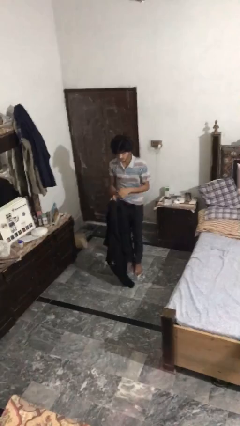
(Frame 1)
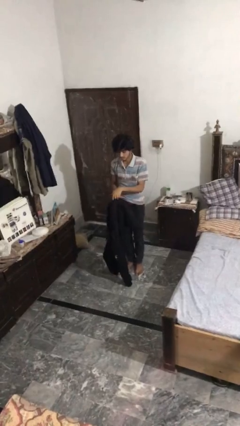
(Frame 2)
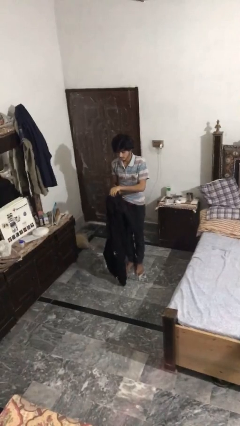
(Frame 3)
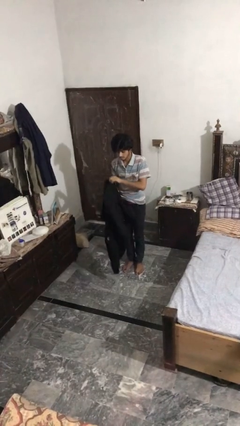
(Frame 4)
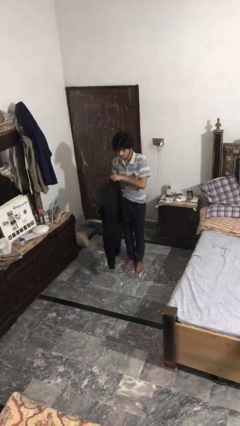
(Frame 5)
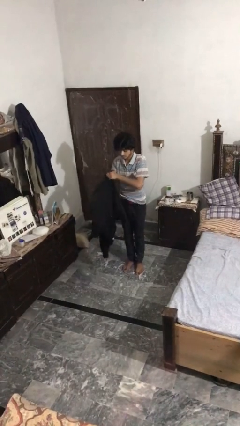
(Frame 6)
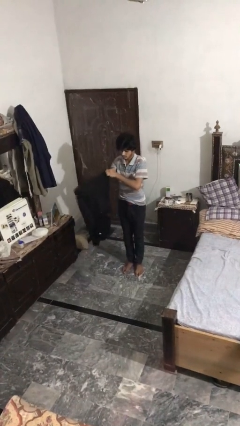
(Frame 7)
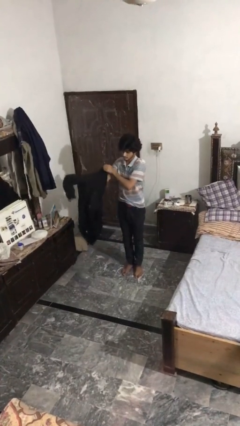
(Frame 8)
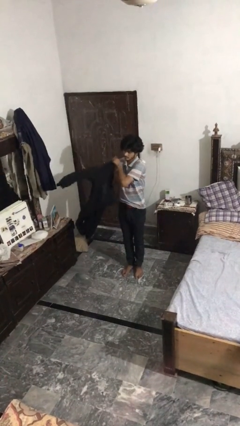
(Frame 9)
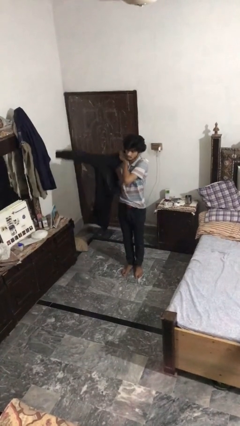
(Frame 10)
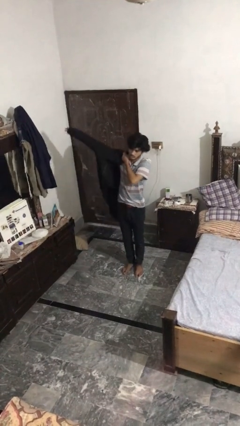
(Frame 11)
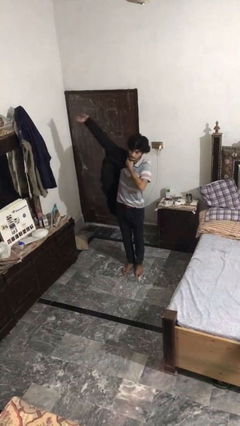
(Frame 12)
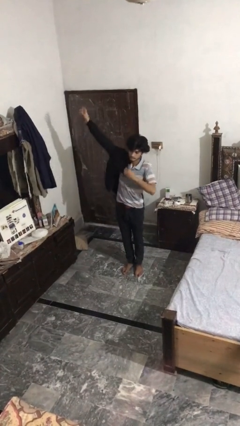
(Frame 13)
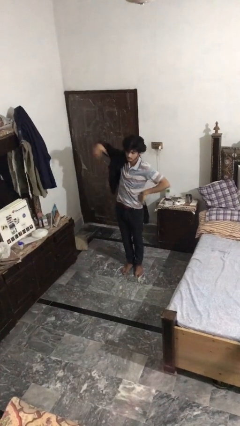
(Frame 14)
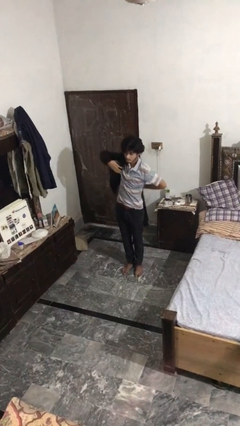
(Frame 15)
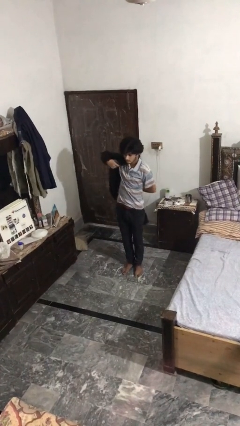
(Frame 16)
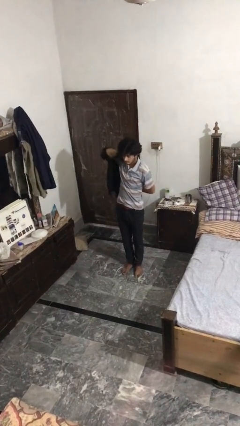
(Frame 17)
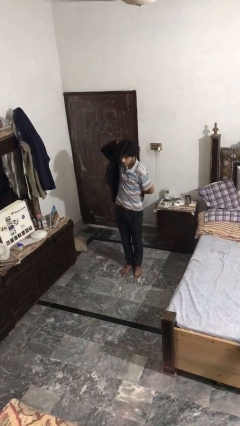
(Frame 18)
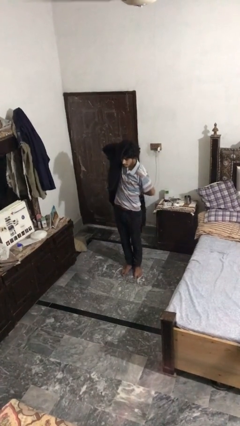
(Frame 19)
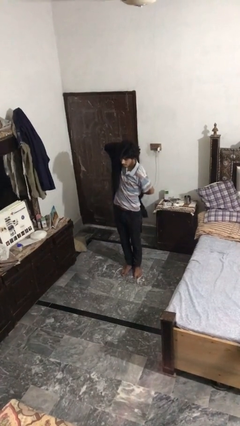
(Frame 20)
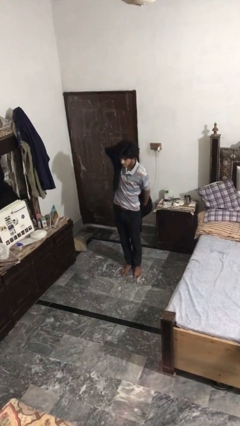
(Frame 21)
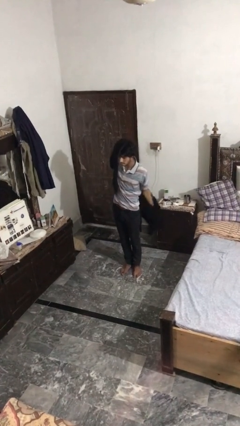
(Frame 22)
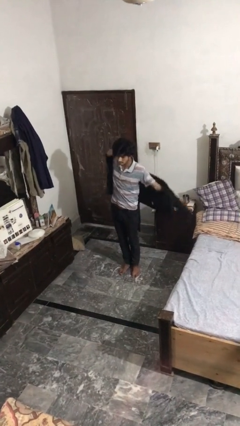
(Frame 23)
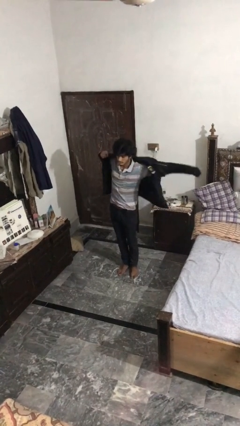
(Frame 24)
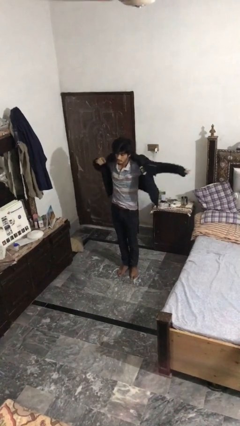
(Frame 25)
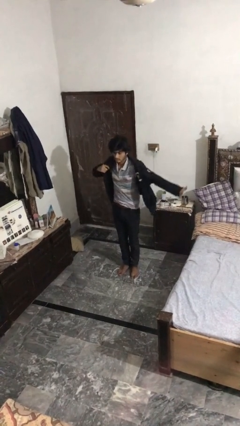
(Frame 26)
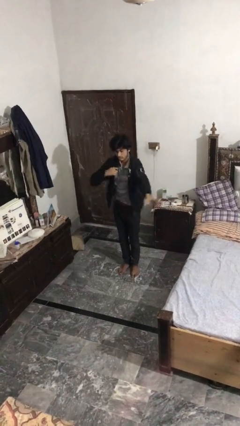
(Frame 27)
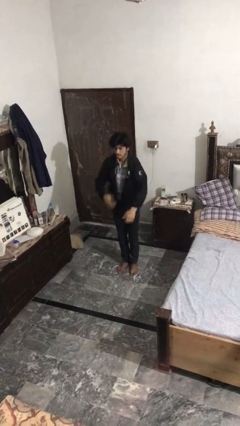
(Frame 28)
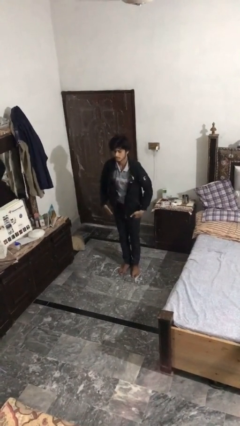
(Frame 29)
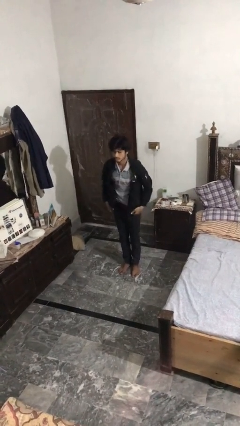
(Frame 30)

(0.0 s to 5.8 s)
person puts on jacket

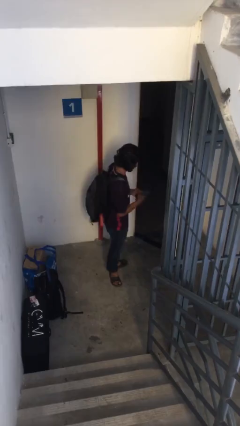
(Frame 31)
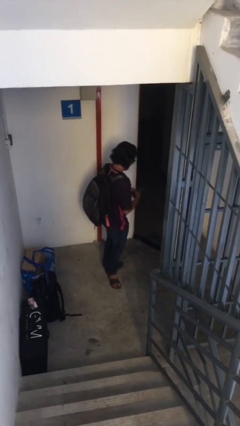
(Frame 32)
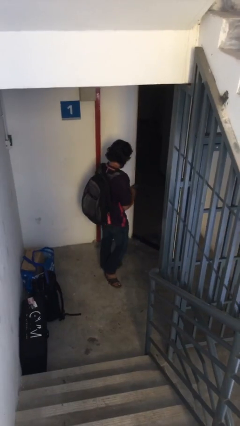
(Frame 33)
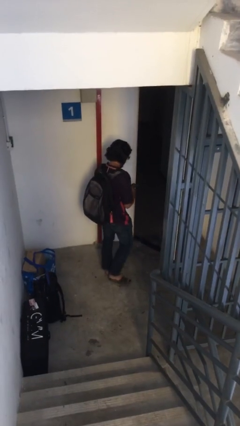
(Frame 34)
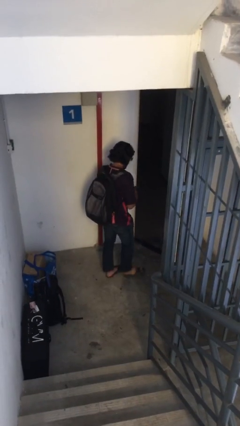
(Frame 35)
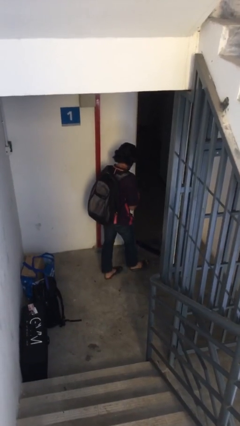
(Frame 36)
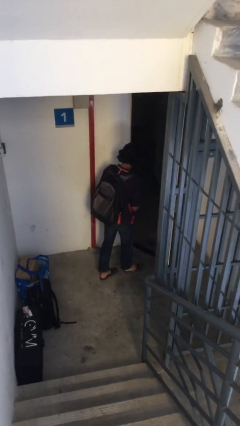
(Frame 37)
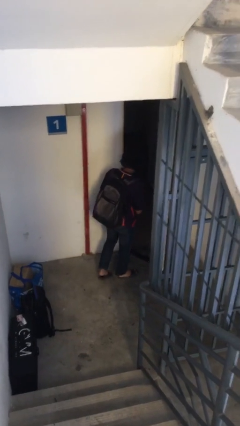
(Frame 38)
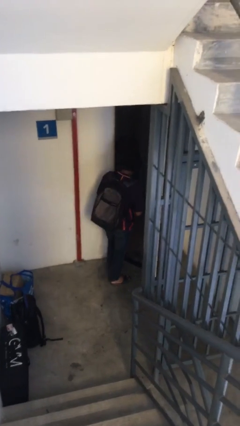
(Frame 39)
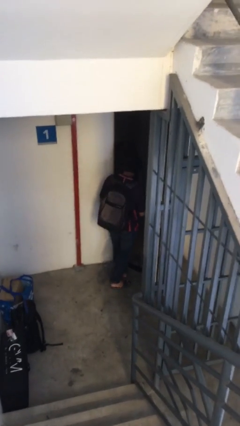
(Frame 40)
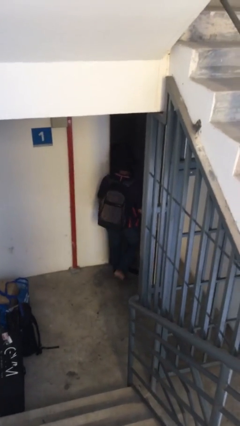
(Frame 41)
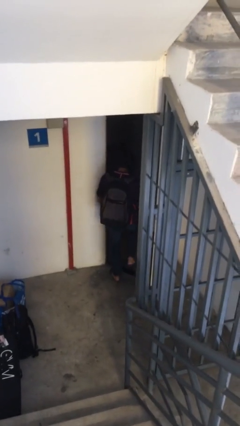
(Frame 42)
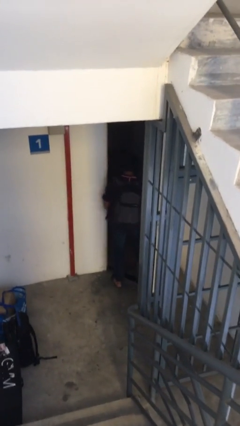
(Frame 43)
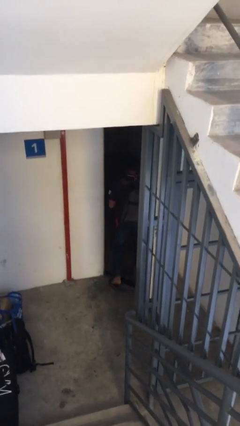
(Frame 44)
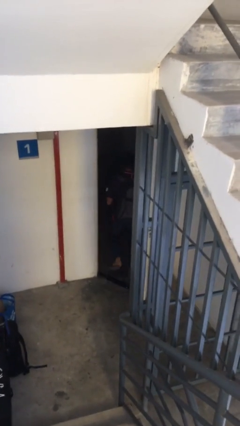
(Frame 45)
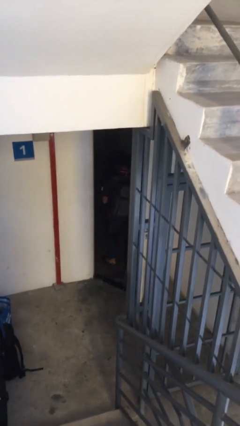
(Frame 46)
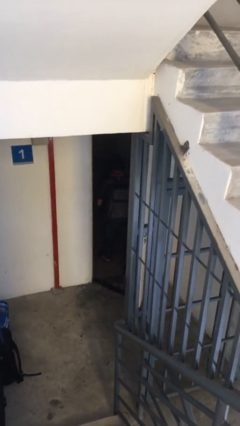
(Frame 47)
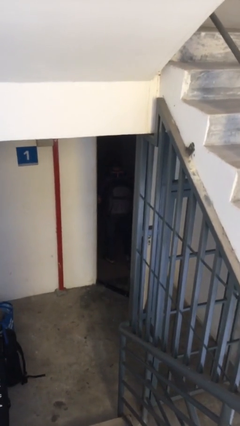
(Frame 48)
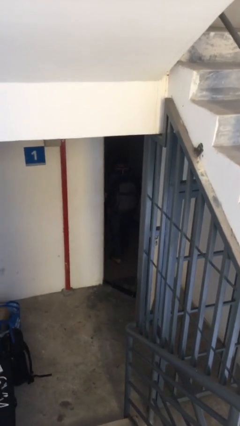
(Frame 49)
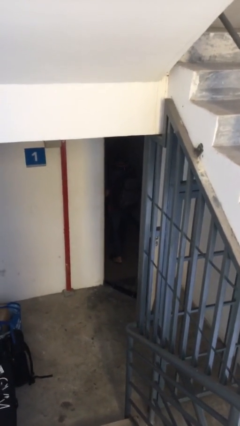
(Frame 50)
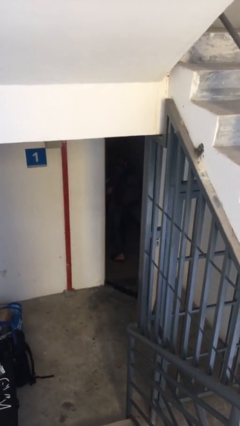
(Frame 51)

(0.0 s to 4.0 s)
person exits scene through structure

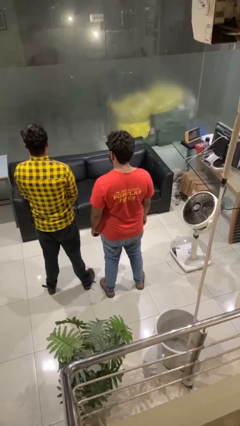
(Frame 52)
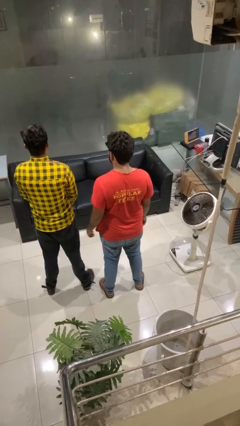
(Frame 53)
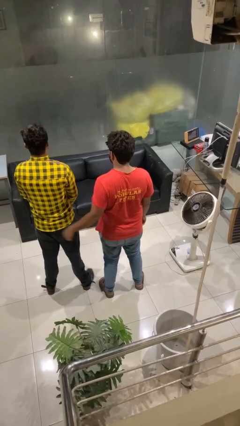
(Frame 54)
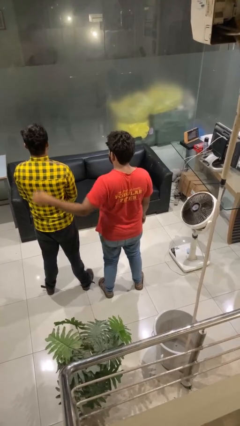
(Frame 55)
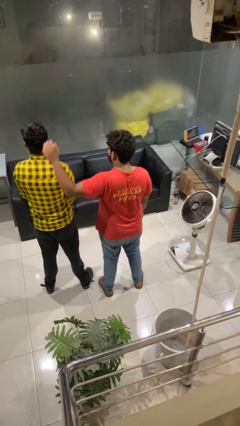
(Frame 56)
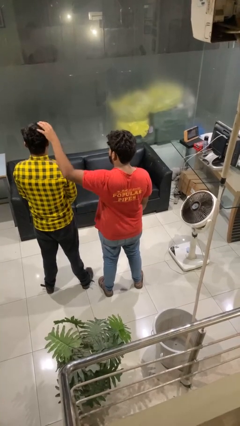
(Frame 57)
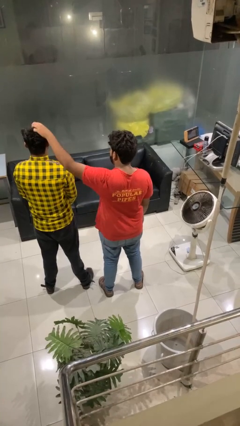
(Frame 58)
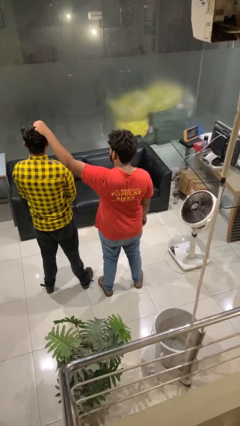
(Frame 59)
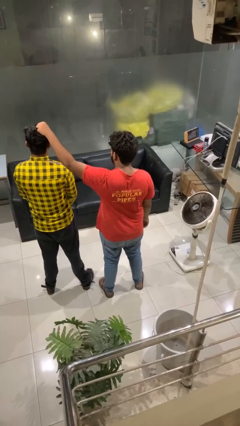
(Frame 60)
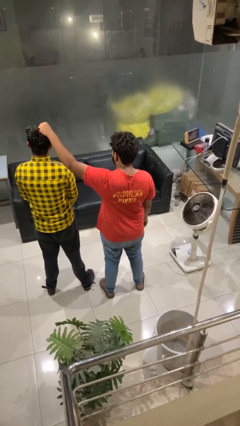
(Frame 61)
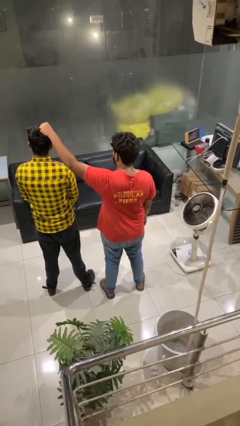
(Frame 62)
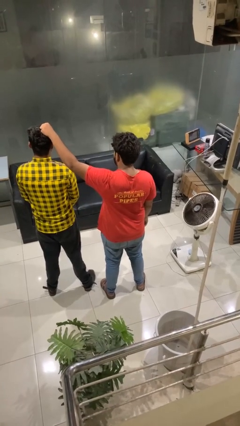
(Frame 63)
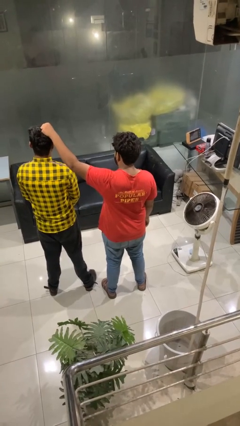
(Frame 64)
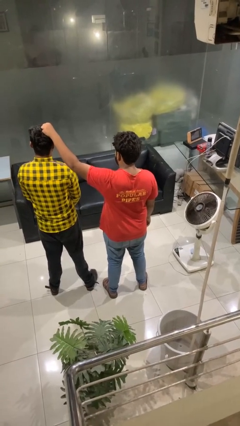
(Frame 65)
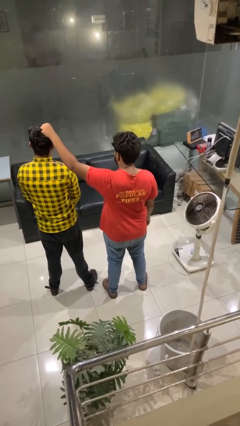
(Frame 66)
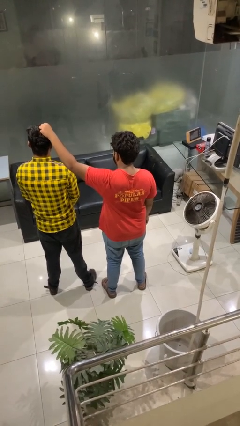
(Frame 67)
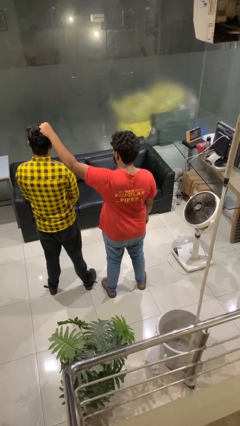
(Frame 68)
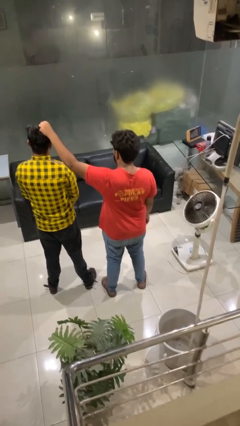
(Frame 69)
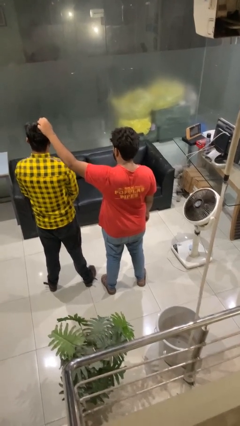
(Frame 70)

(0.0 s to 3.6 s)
person grabs person by hair

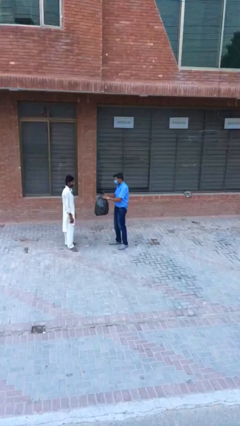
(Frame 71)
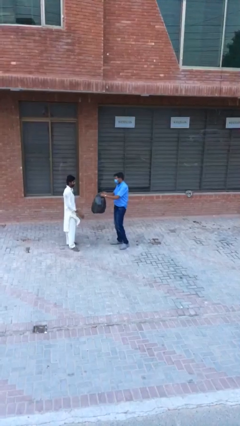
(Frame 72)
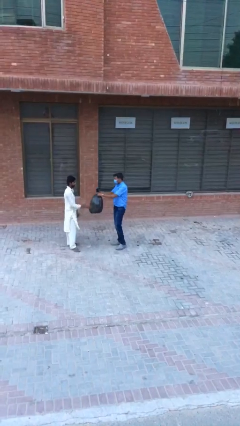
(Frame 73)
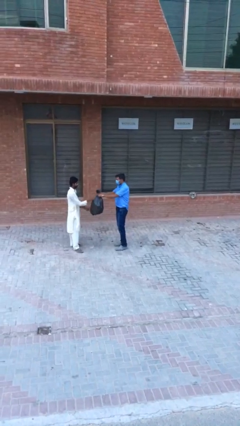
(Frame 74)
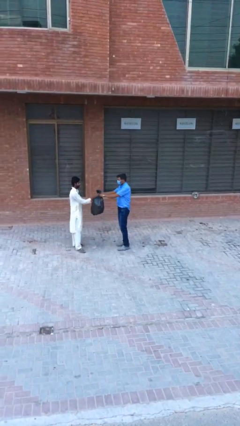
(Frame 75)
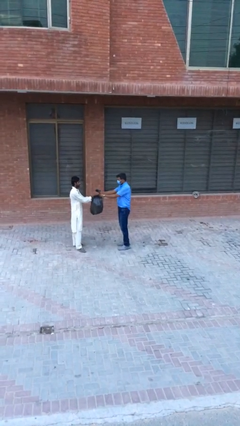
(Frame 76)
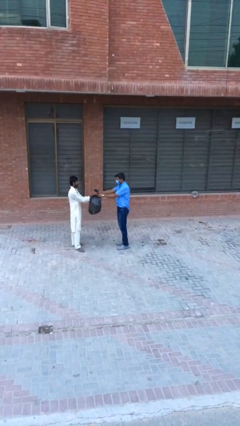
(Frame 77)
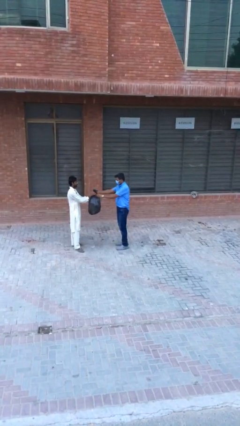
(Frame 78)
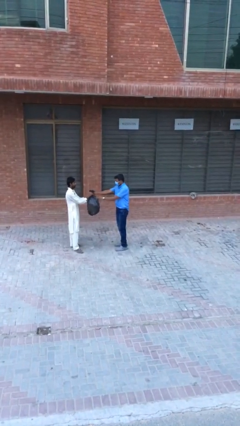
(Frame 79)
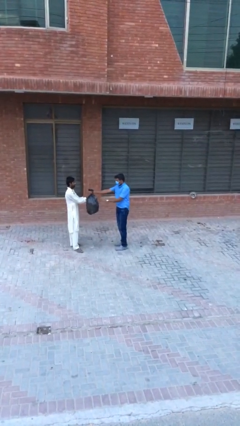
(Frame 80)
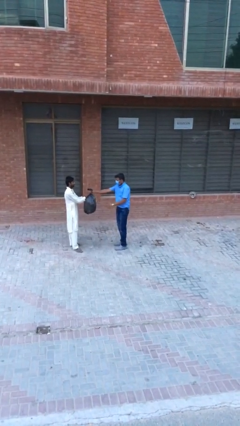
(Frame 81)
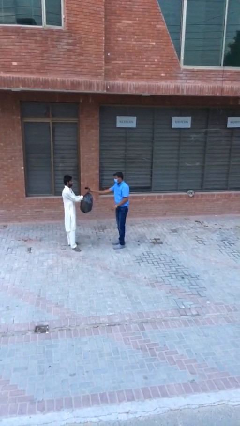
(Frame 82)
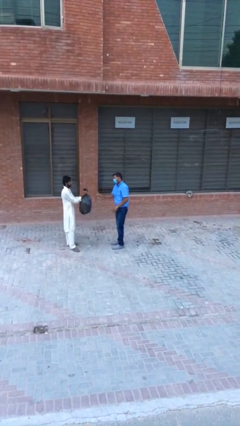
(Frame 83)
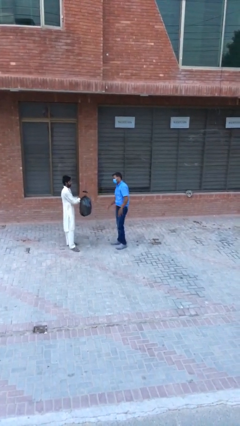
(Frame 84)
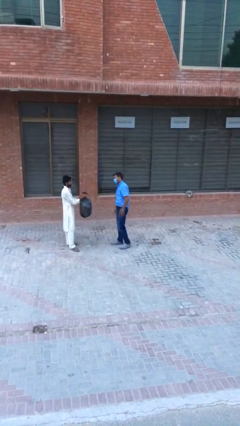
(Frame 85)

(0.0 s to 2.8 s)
person transfers object to person

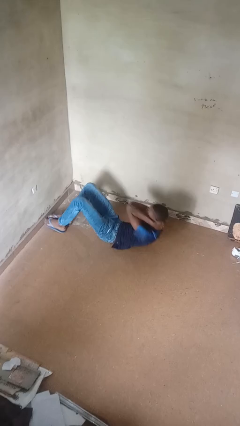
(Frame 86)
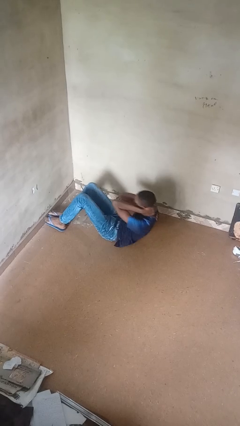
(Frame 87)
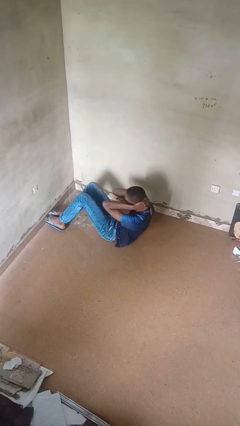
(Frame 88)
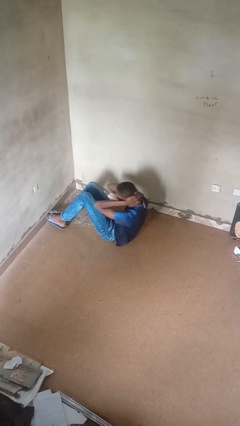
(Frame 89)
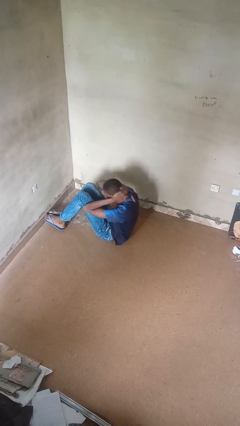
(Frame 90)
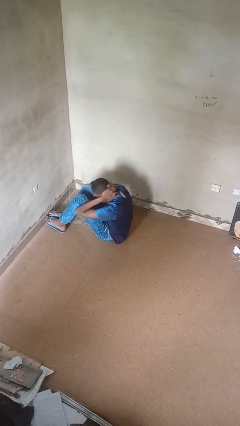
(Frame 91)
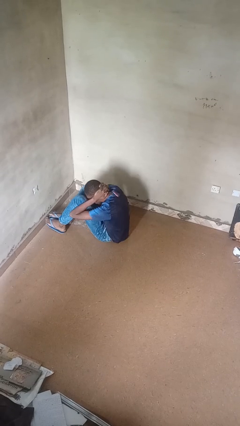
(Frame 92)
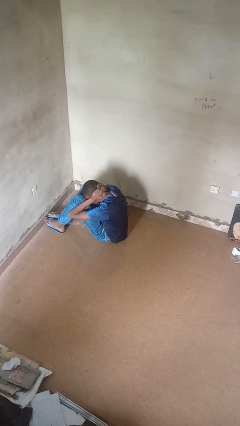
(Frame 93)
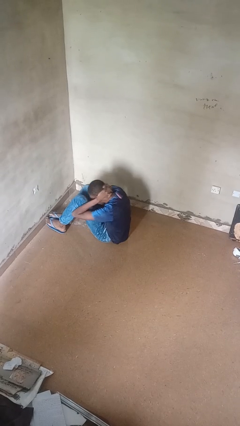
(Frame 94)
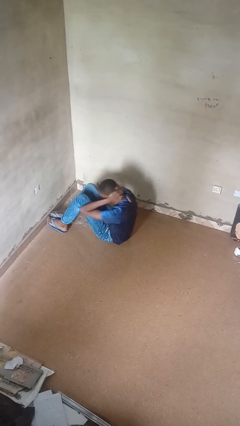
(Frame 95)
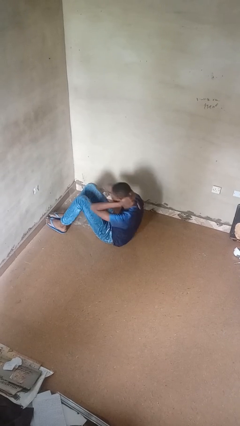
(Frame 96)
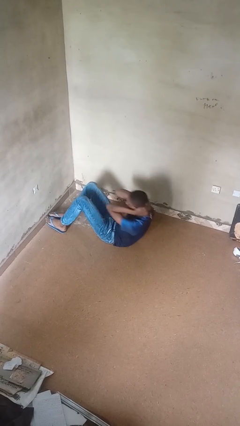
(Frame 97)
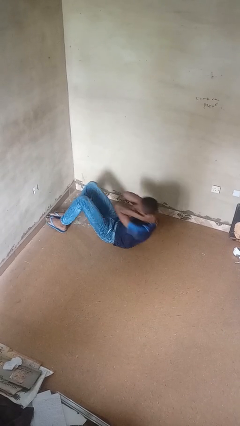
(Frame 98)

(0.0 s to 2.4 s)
person exercises with situp
